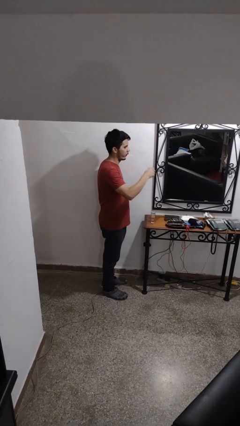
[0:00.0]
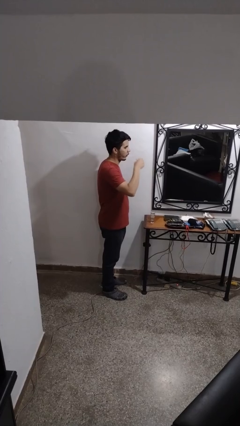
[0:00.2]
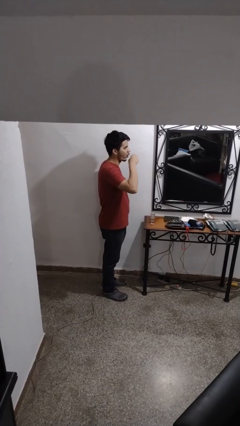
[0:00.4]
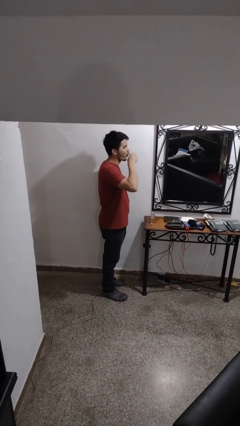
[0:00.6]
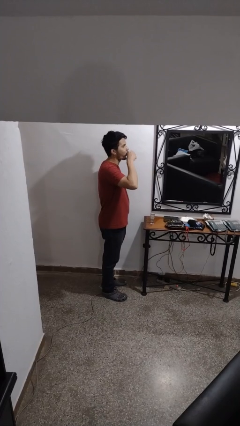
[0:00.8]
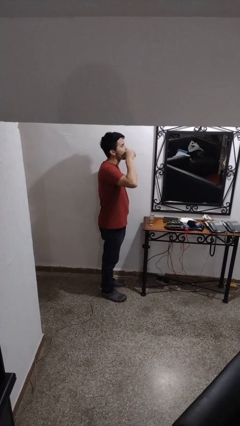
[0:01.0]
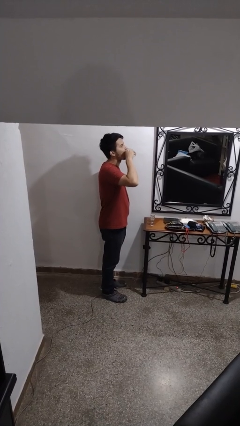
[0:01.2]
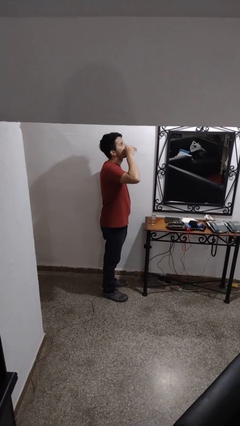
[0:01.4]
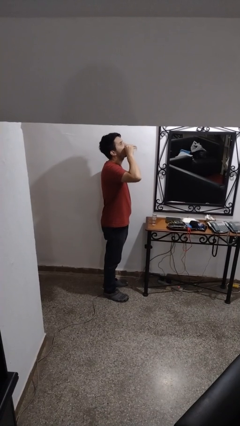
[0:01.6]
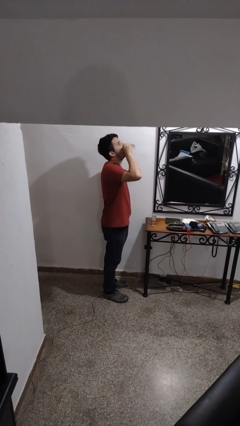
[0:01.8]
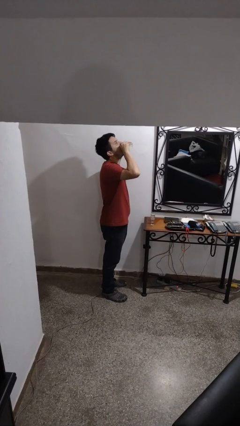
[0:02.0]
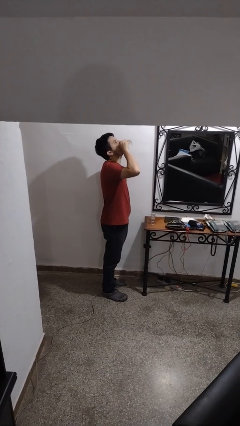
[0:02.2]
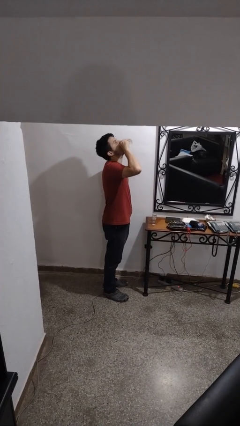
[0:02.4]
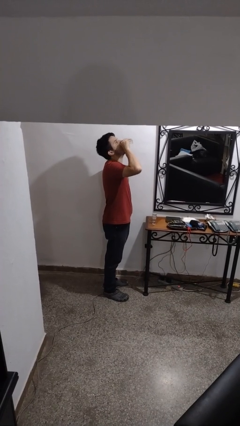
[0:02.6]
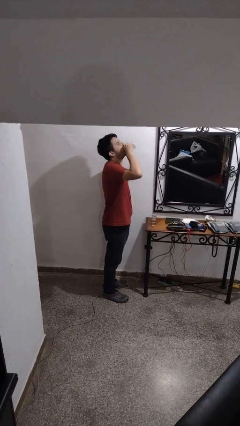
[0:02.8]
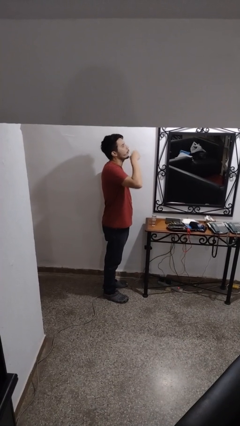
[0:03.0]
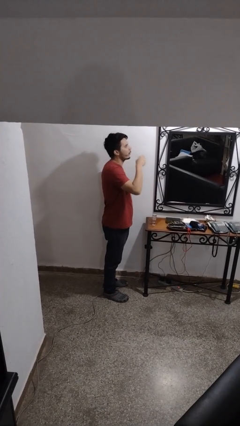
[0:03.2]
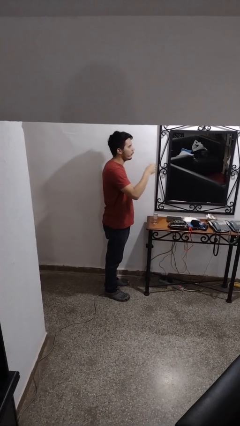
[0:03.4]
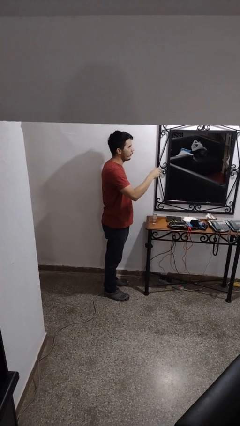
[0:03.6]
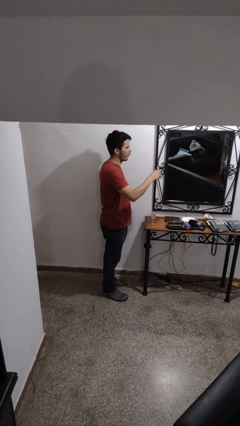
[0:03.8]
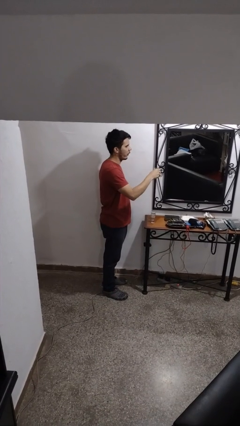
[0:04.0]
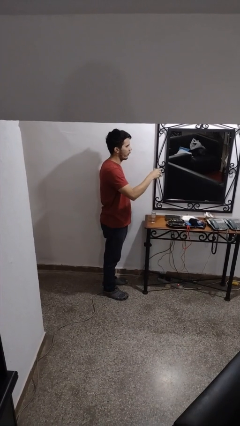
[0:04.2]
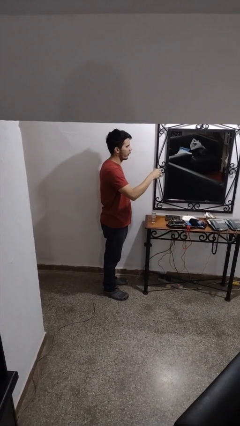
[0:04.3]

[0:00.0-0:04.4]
person drinks from shotglass

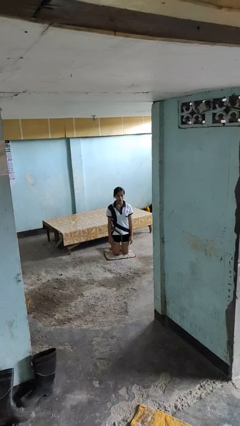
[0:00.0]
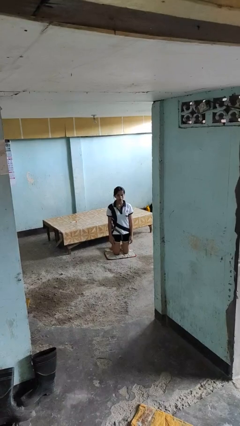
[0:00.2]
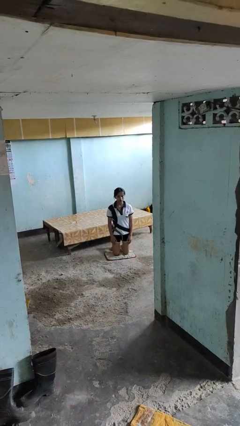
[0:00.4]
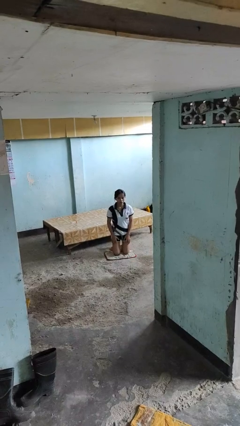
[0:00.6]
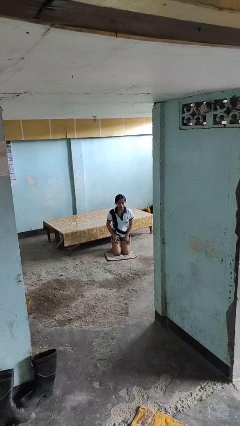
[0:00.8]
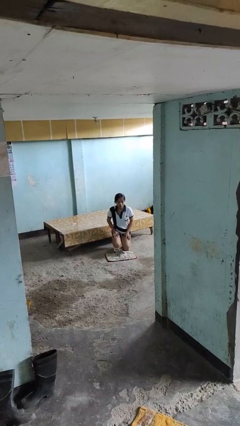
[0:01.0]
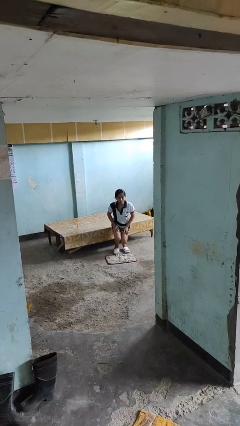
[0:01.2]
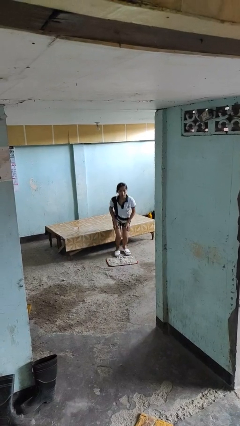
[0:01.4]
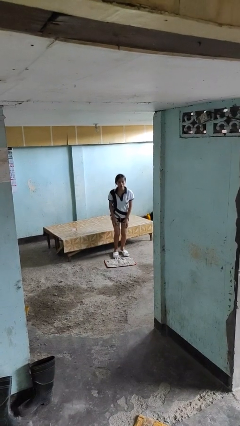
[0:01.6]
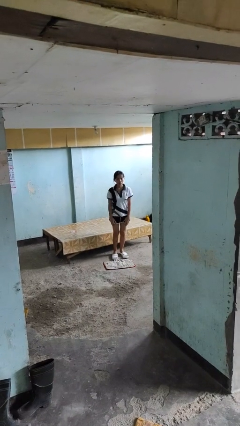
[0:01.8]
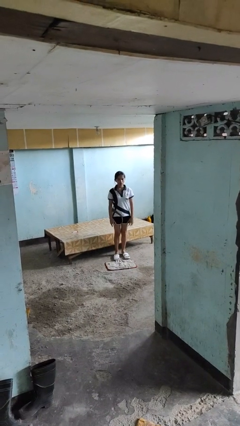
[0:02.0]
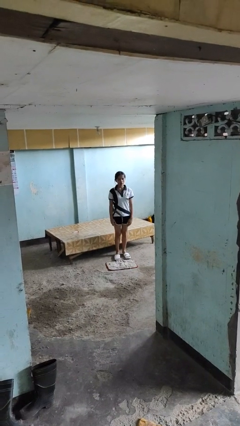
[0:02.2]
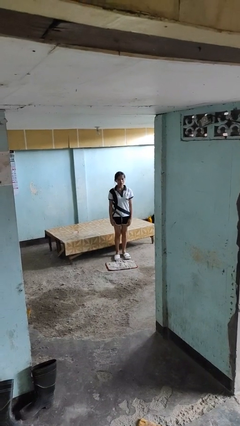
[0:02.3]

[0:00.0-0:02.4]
person stands up from floor

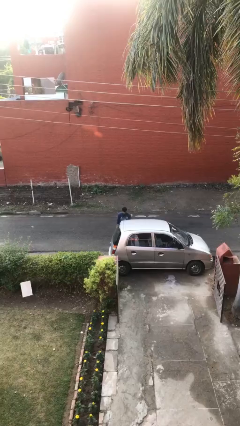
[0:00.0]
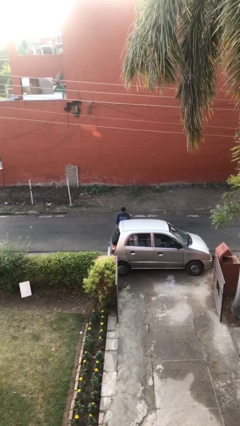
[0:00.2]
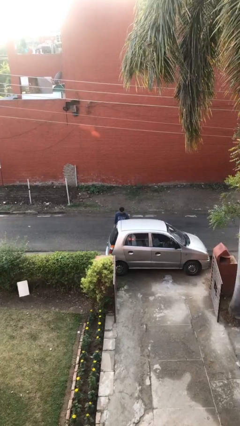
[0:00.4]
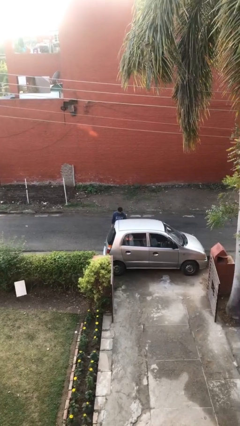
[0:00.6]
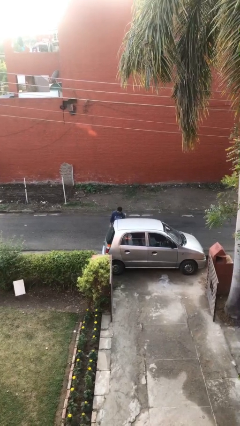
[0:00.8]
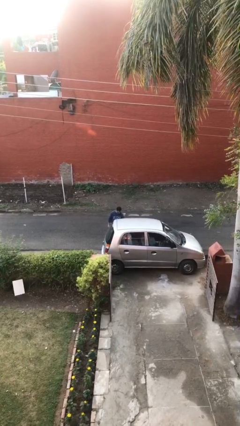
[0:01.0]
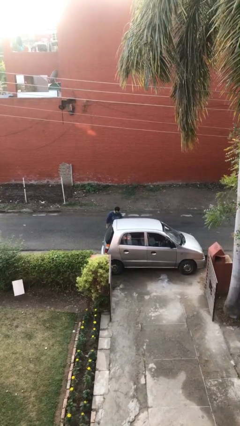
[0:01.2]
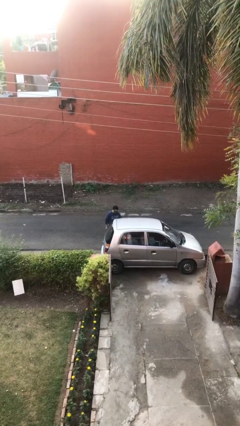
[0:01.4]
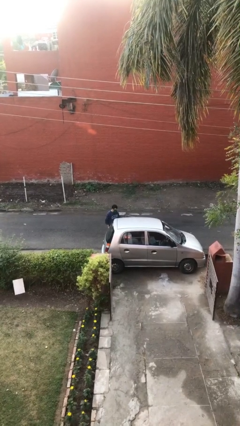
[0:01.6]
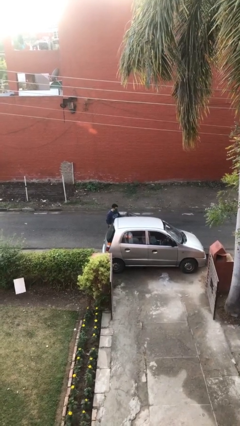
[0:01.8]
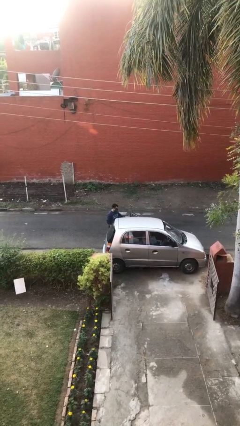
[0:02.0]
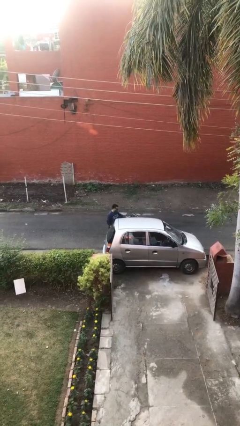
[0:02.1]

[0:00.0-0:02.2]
person opens car door

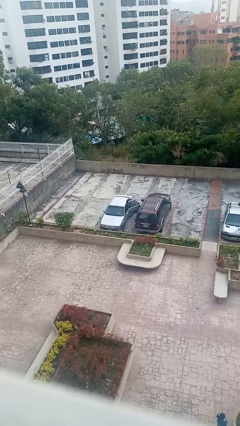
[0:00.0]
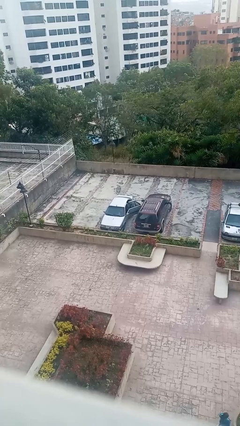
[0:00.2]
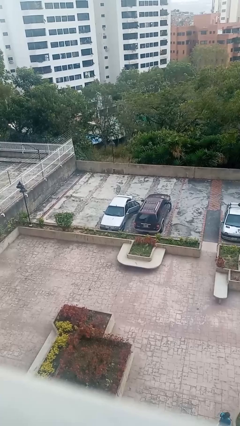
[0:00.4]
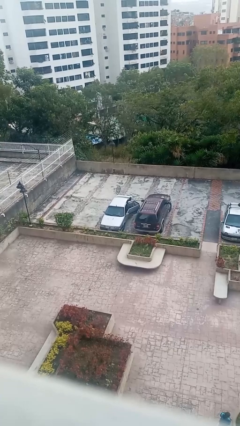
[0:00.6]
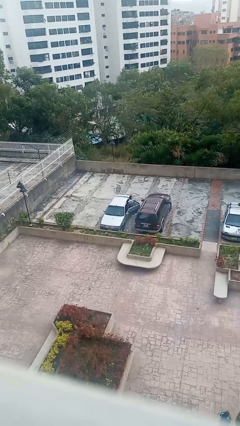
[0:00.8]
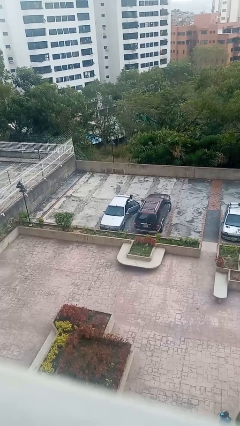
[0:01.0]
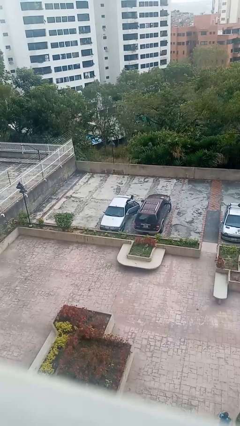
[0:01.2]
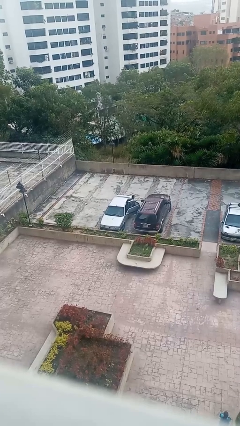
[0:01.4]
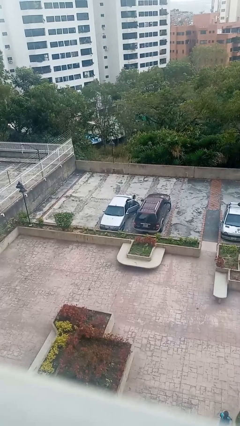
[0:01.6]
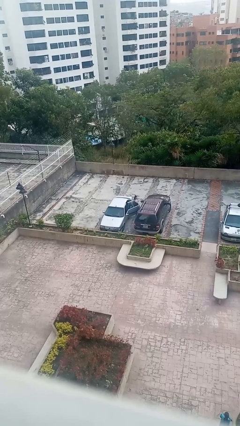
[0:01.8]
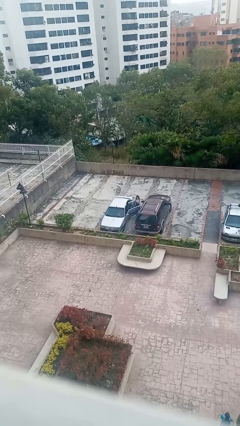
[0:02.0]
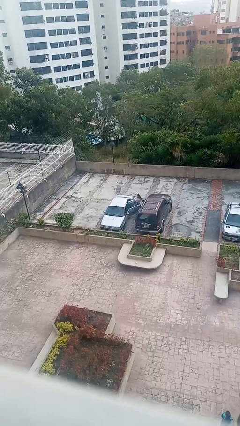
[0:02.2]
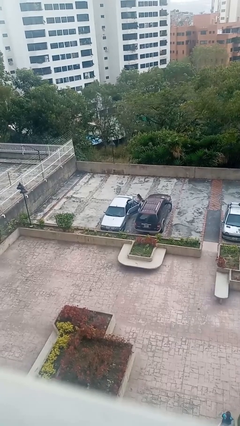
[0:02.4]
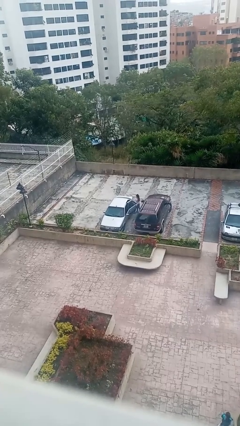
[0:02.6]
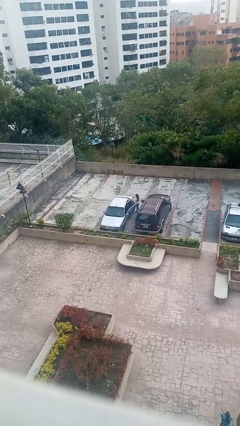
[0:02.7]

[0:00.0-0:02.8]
car drops off person

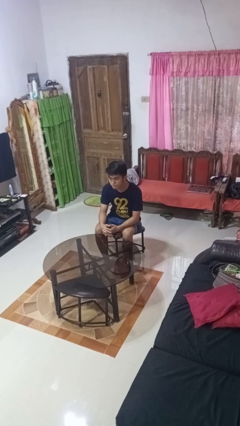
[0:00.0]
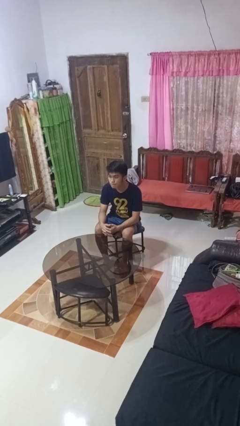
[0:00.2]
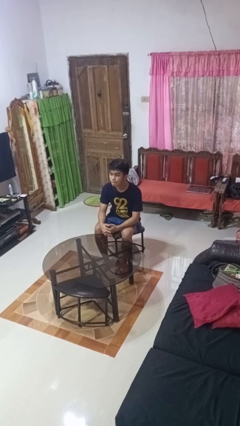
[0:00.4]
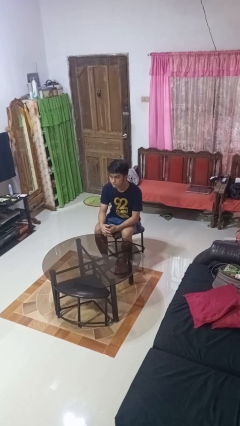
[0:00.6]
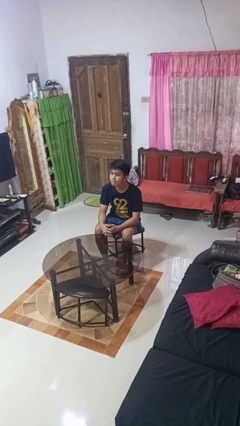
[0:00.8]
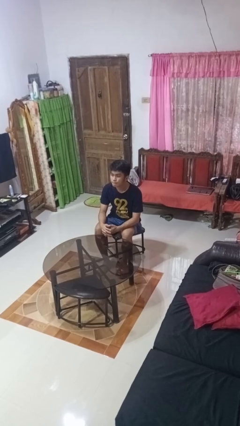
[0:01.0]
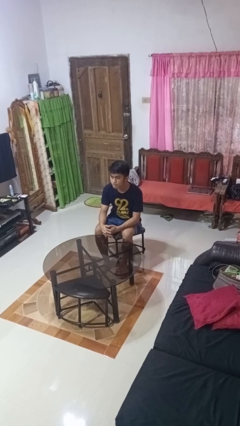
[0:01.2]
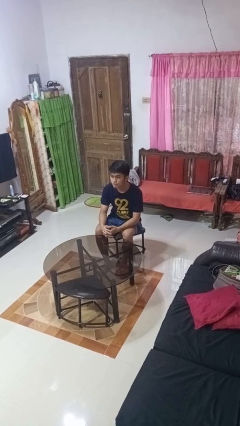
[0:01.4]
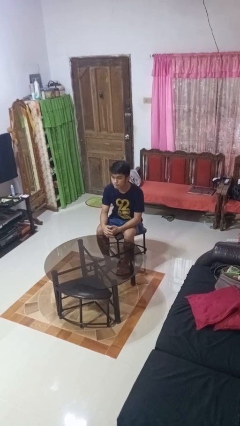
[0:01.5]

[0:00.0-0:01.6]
person nods head

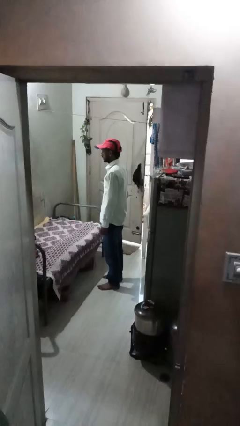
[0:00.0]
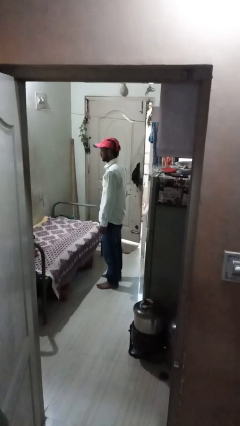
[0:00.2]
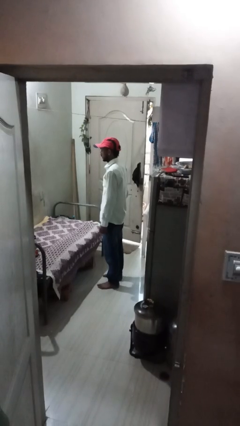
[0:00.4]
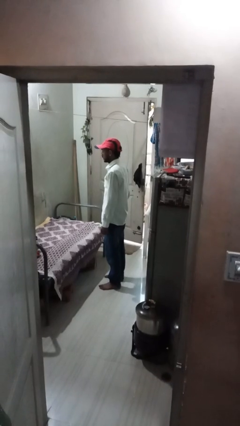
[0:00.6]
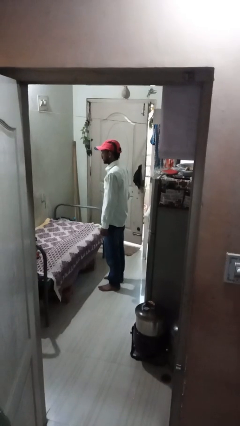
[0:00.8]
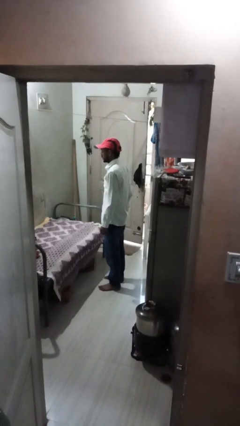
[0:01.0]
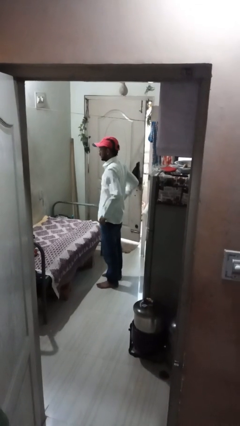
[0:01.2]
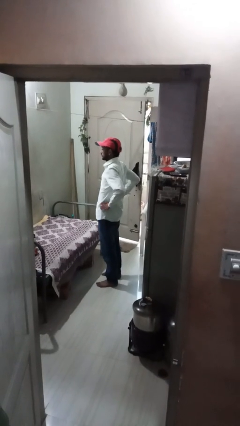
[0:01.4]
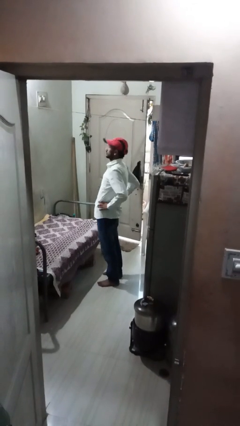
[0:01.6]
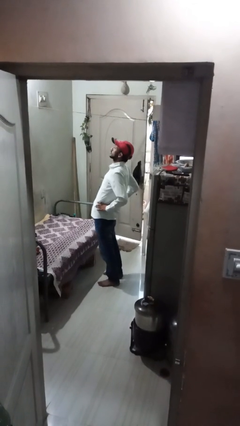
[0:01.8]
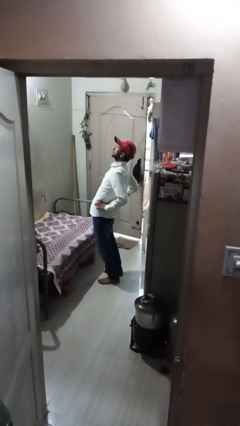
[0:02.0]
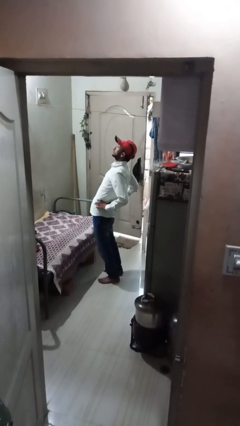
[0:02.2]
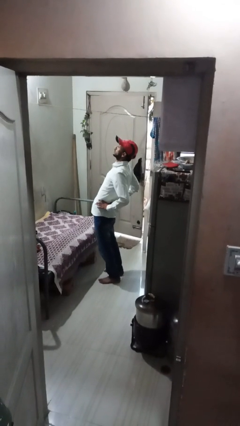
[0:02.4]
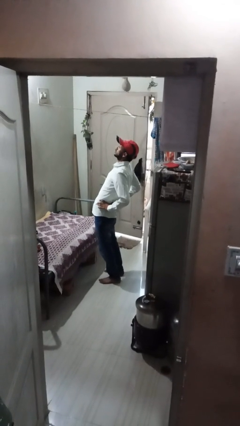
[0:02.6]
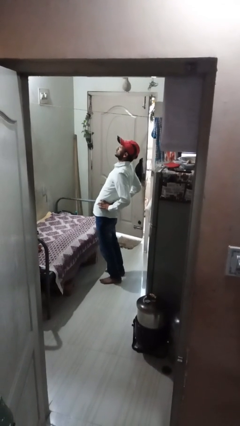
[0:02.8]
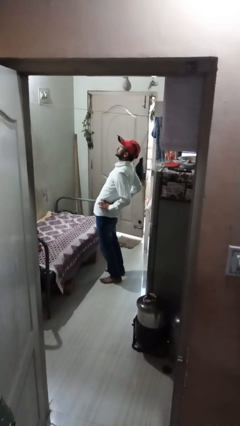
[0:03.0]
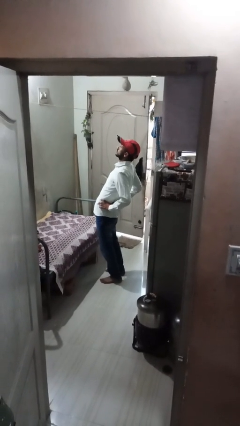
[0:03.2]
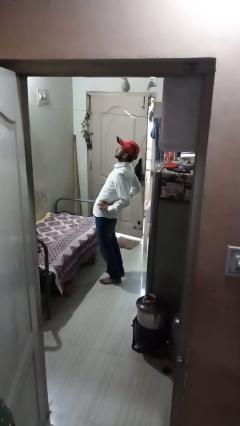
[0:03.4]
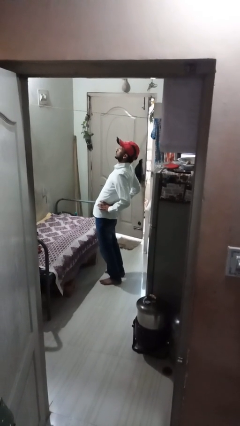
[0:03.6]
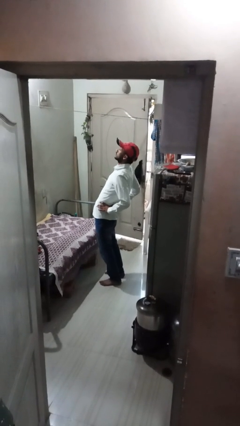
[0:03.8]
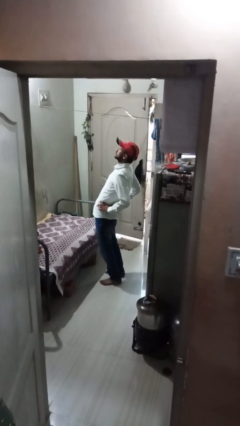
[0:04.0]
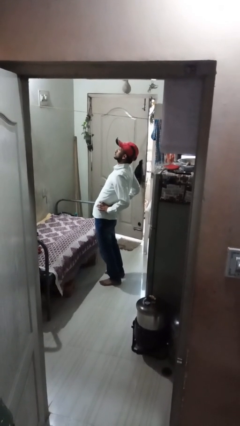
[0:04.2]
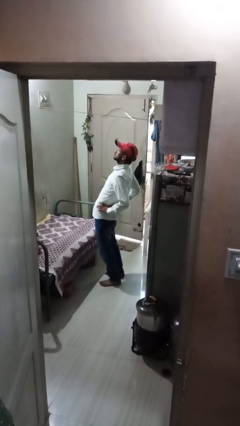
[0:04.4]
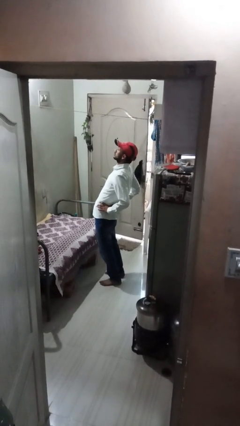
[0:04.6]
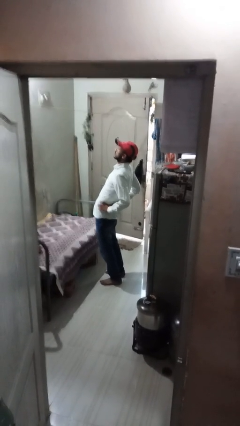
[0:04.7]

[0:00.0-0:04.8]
person stretches back
